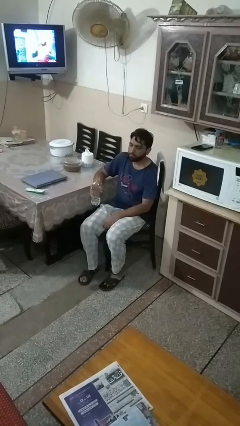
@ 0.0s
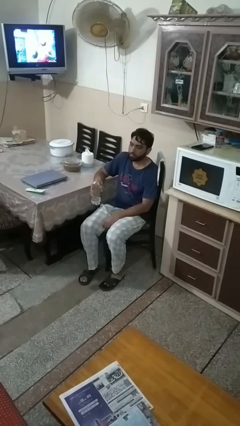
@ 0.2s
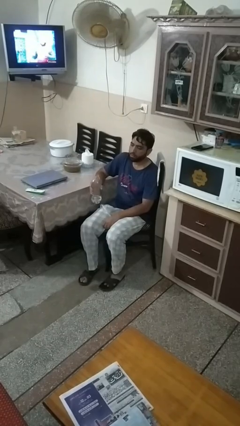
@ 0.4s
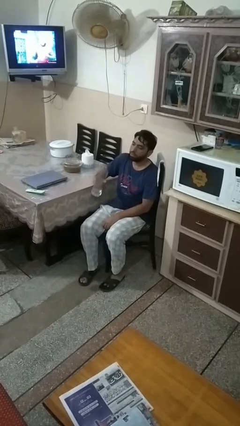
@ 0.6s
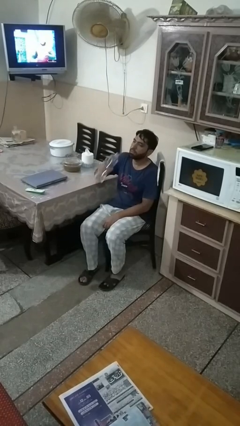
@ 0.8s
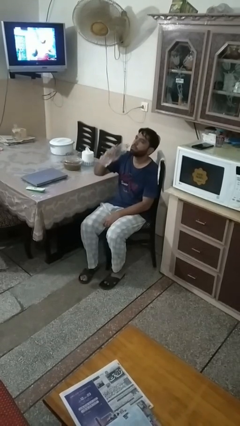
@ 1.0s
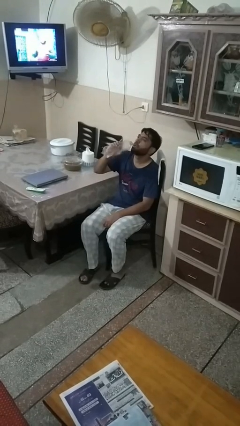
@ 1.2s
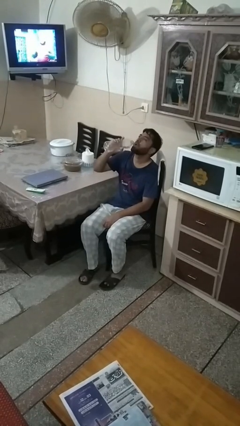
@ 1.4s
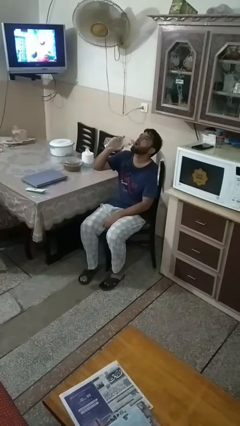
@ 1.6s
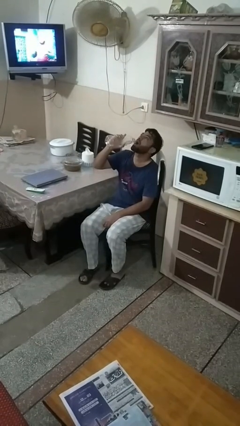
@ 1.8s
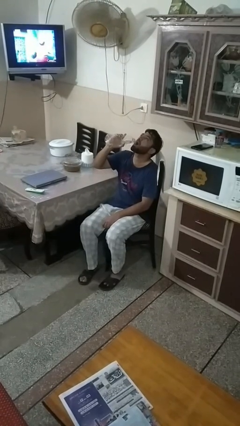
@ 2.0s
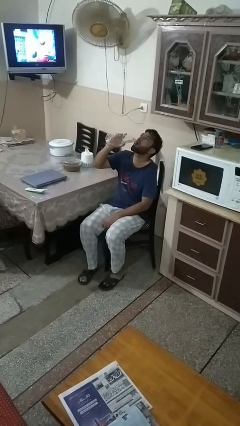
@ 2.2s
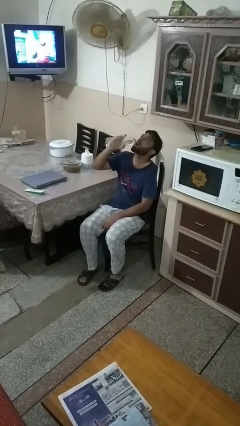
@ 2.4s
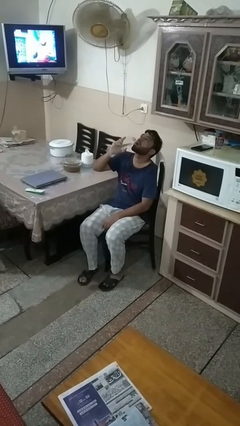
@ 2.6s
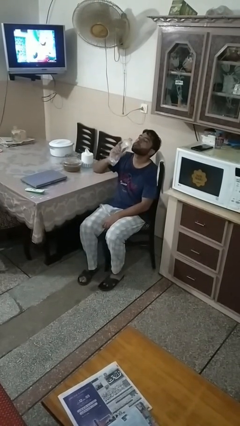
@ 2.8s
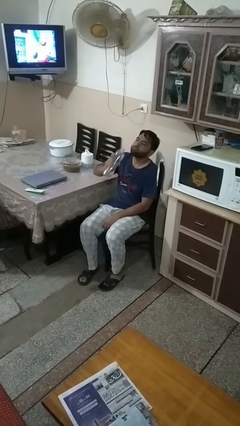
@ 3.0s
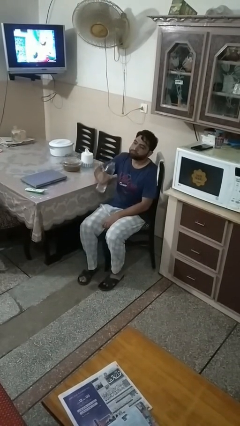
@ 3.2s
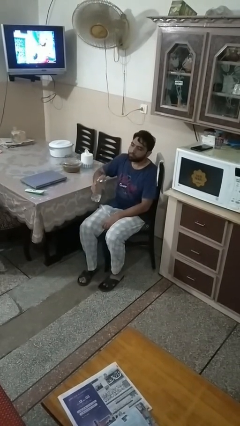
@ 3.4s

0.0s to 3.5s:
person drinks from bottle

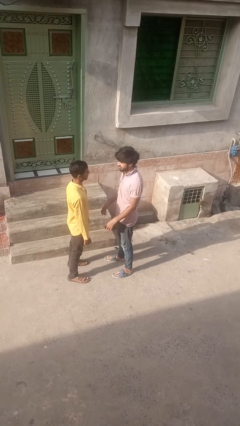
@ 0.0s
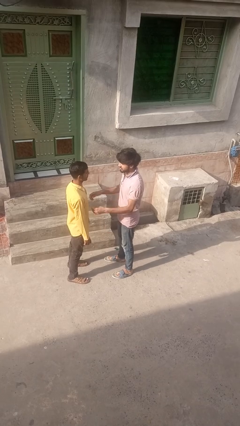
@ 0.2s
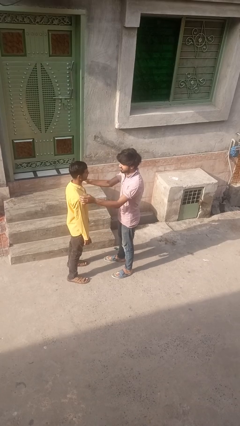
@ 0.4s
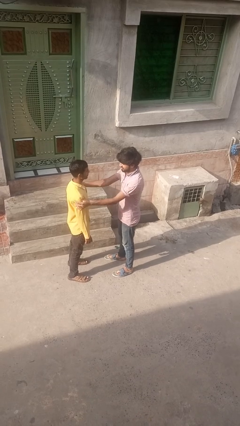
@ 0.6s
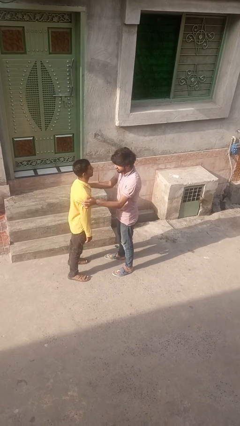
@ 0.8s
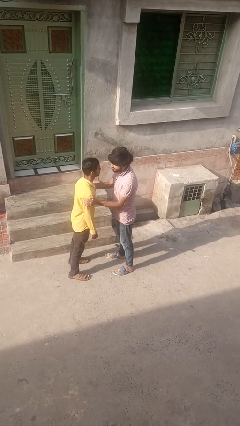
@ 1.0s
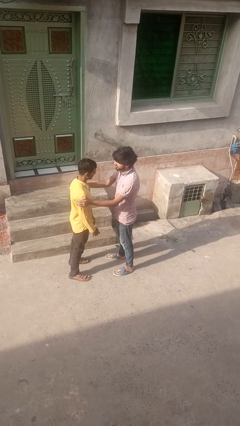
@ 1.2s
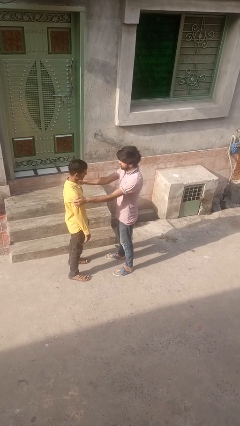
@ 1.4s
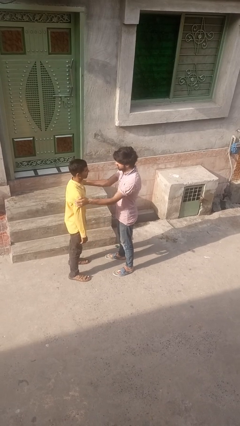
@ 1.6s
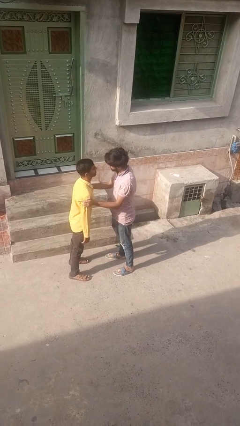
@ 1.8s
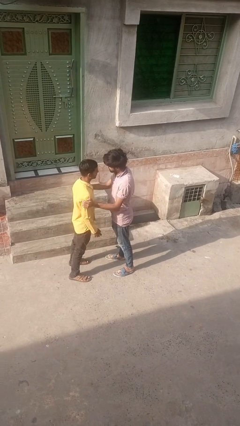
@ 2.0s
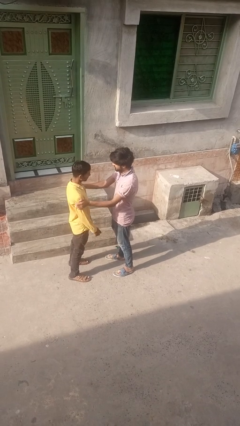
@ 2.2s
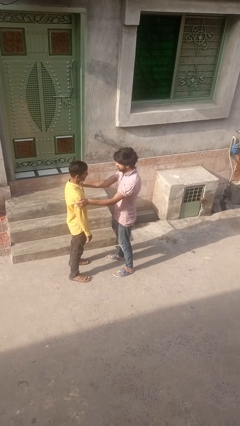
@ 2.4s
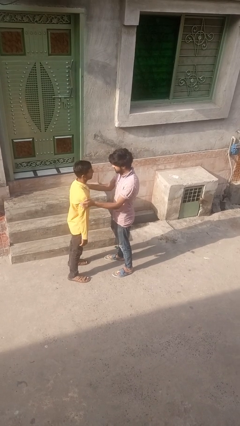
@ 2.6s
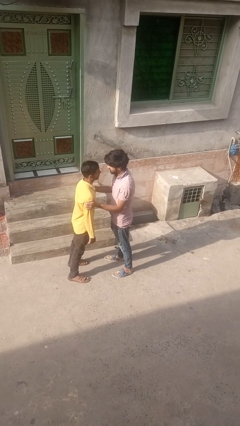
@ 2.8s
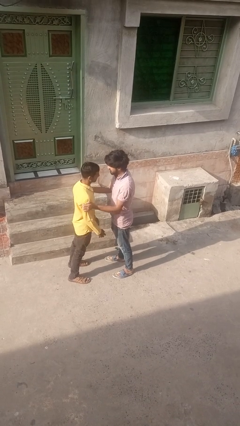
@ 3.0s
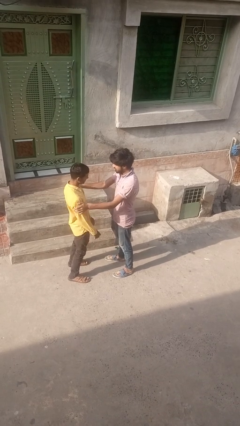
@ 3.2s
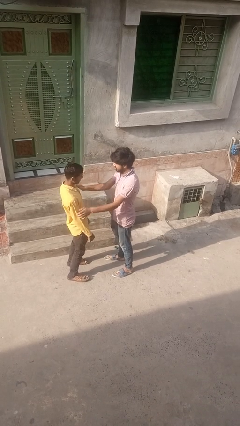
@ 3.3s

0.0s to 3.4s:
person grabs person by bicep

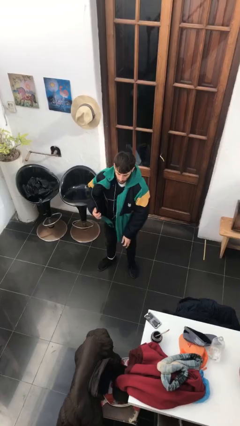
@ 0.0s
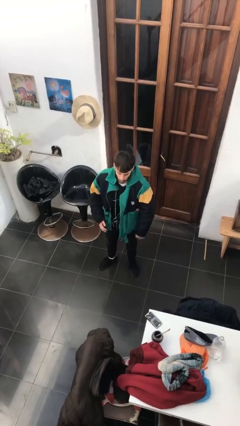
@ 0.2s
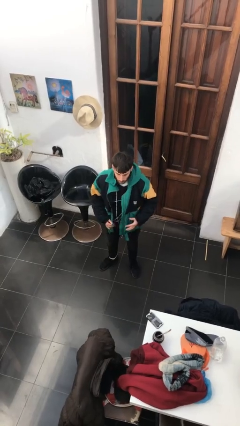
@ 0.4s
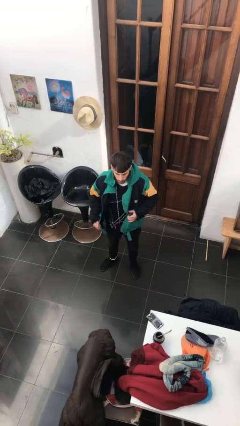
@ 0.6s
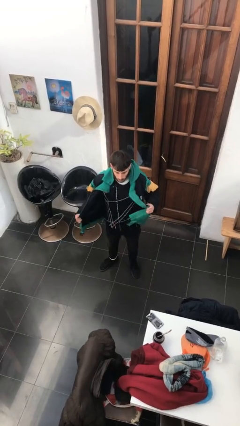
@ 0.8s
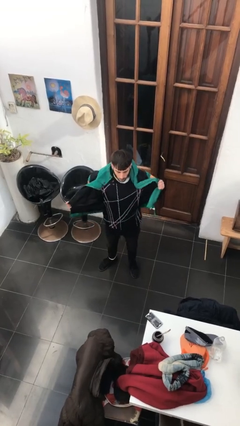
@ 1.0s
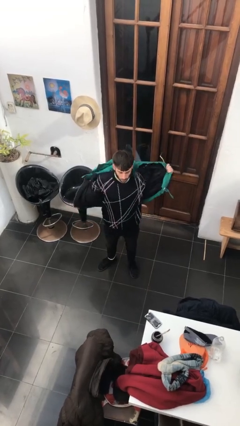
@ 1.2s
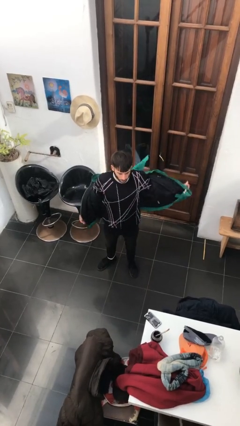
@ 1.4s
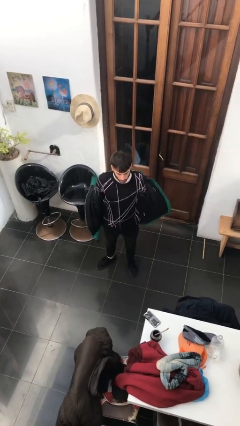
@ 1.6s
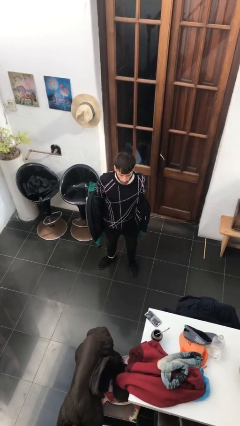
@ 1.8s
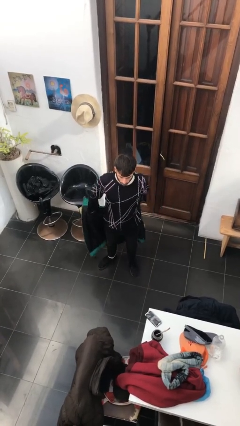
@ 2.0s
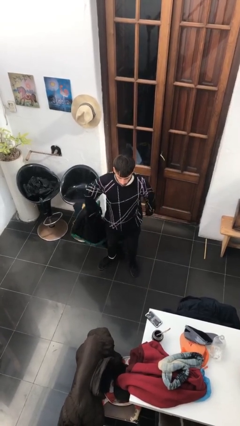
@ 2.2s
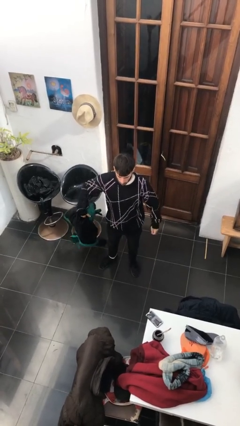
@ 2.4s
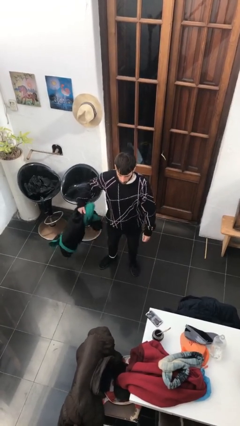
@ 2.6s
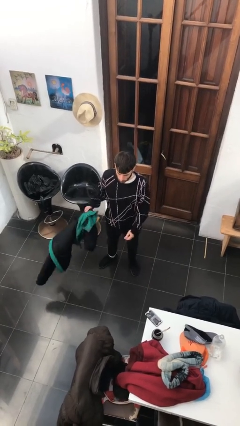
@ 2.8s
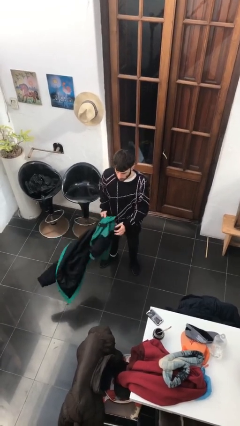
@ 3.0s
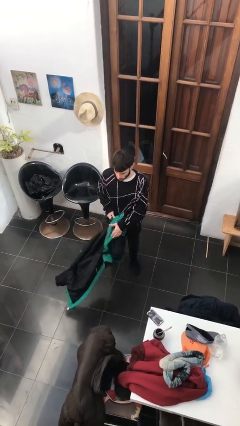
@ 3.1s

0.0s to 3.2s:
person takes off jacket

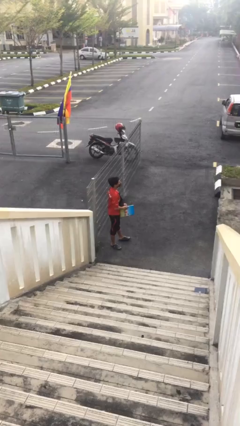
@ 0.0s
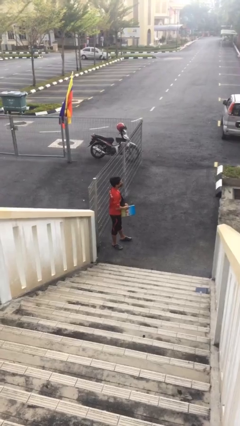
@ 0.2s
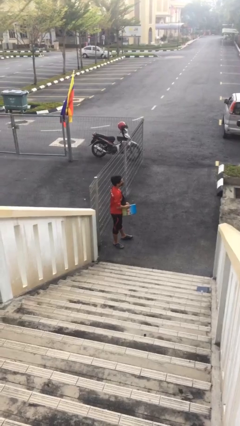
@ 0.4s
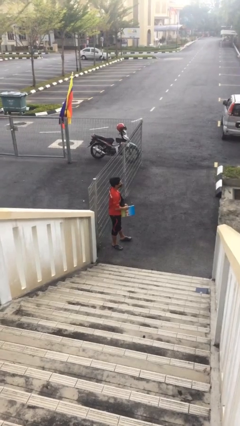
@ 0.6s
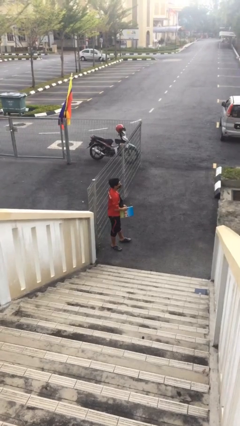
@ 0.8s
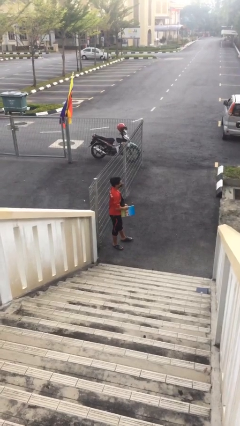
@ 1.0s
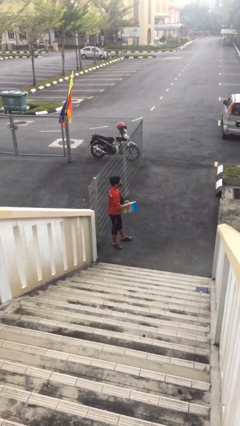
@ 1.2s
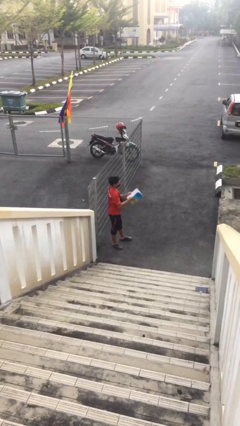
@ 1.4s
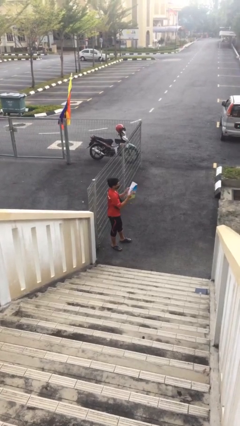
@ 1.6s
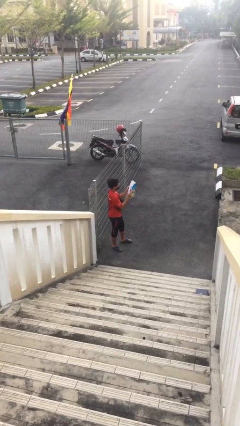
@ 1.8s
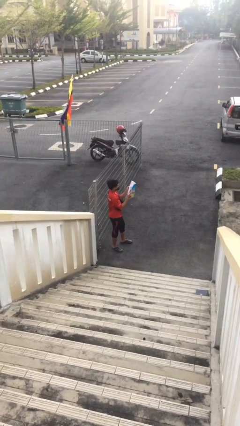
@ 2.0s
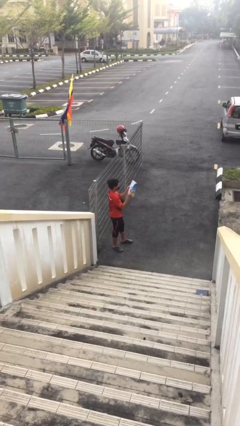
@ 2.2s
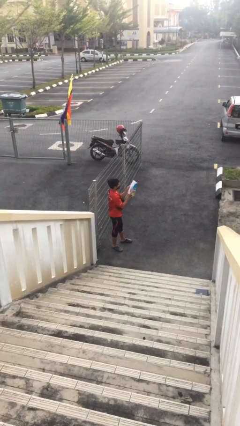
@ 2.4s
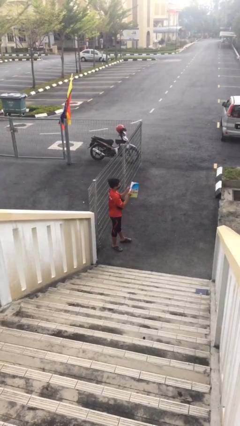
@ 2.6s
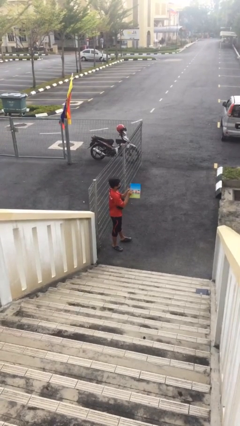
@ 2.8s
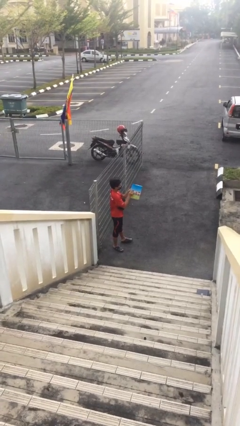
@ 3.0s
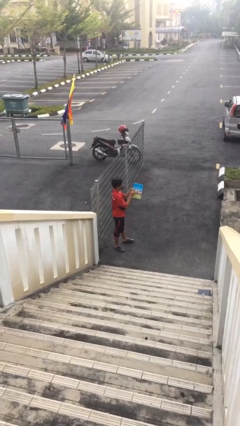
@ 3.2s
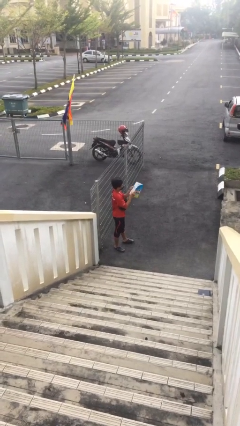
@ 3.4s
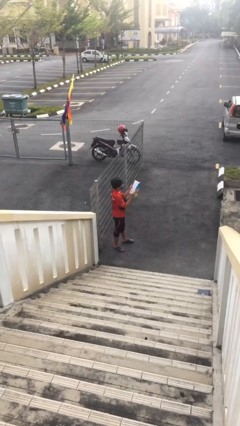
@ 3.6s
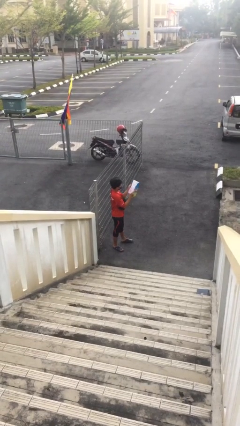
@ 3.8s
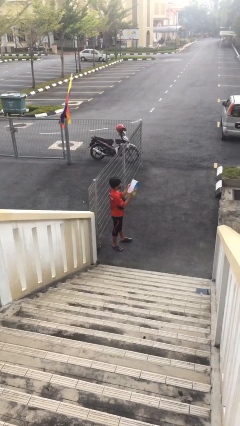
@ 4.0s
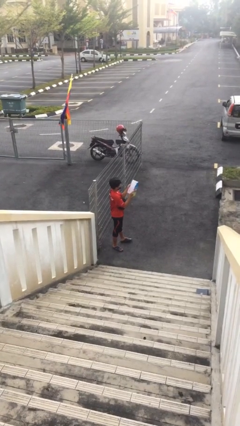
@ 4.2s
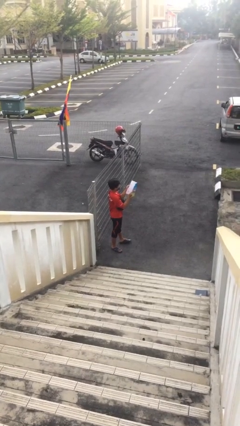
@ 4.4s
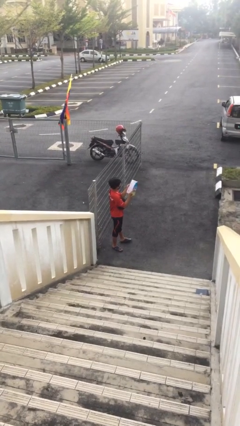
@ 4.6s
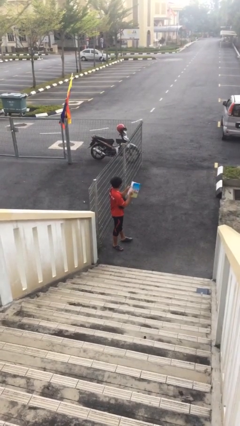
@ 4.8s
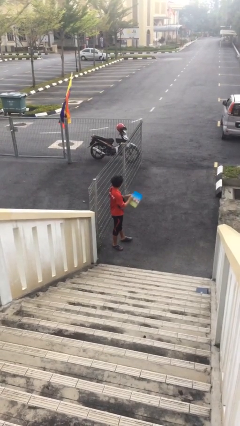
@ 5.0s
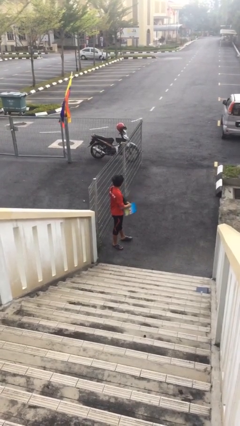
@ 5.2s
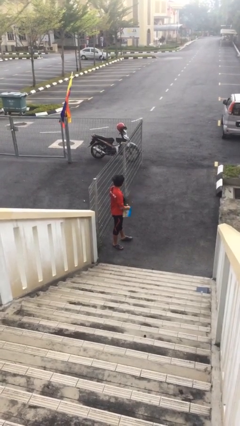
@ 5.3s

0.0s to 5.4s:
person reads document

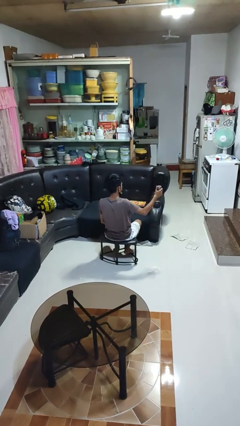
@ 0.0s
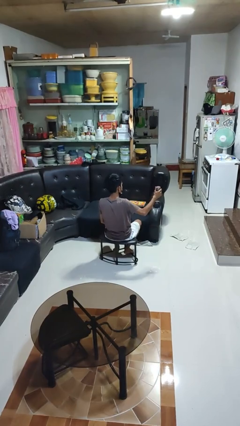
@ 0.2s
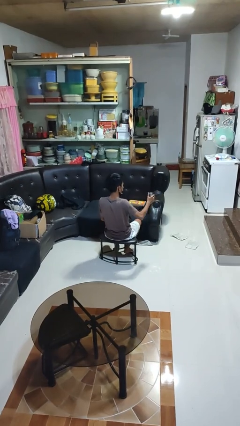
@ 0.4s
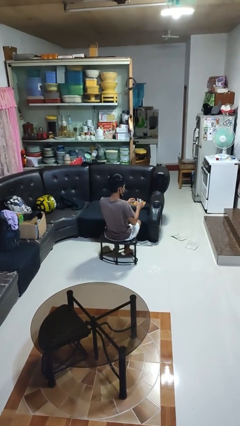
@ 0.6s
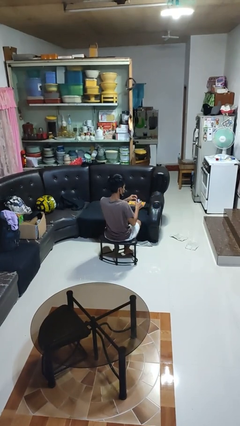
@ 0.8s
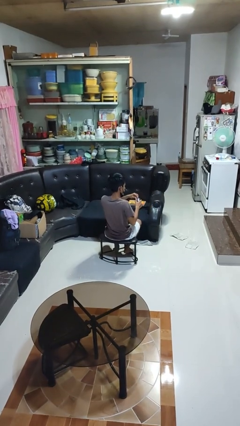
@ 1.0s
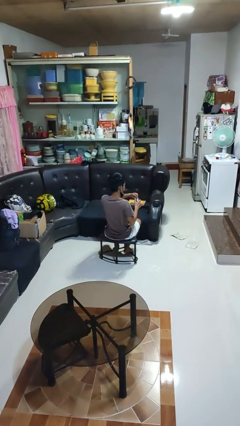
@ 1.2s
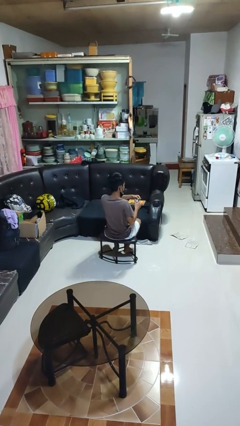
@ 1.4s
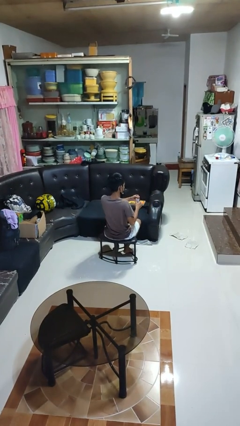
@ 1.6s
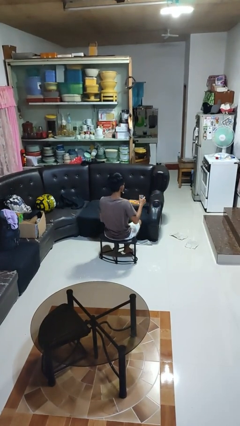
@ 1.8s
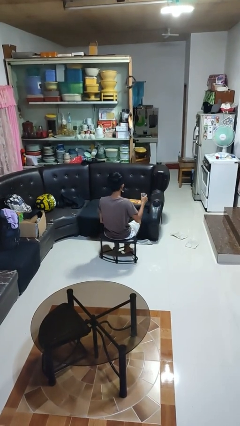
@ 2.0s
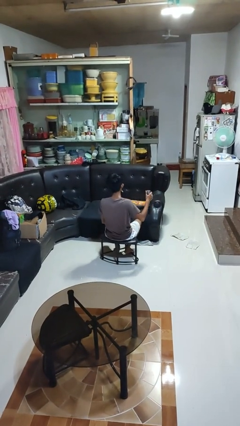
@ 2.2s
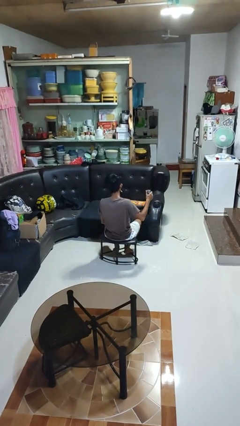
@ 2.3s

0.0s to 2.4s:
person opens beverage can
